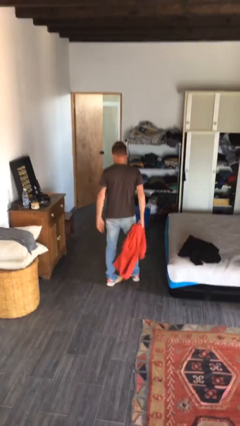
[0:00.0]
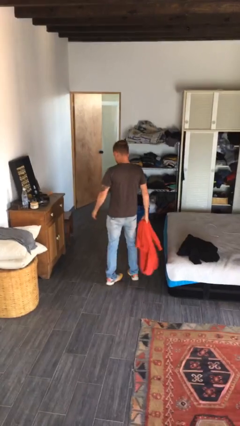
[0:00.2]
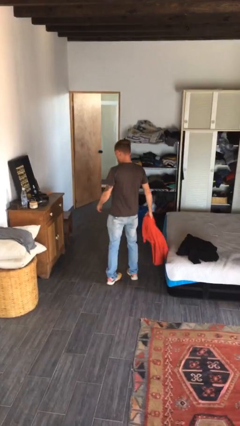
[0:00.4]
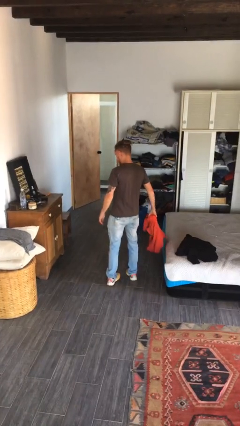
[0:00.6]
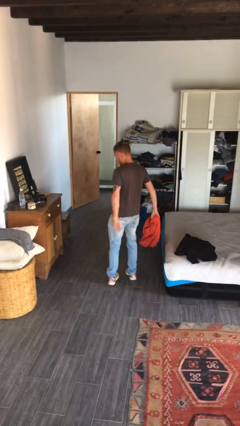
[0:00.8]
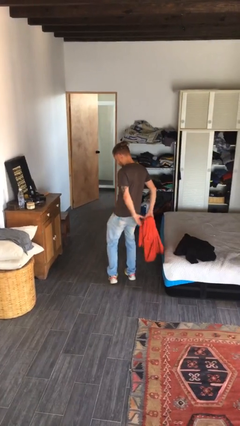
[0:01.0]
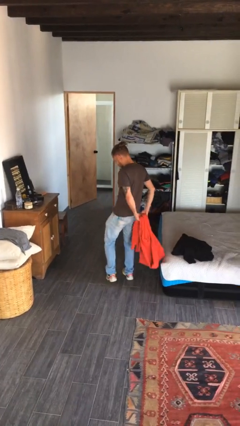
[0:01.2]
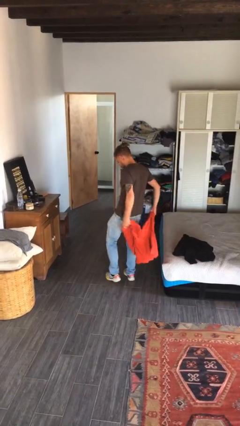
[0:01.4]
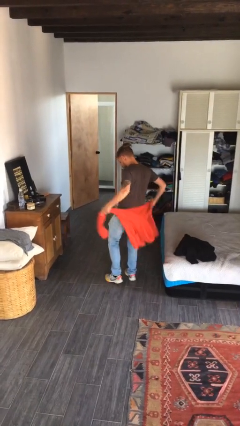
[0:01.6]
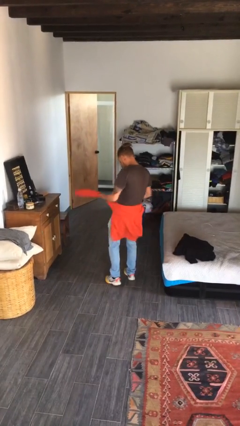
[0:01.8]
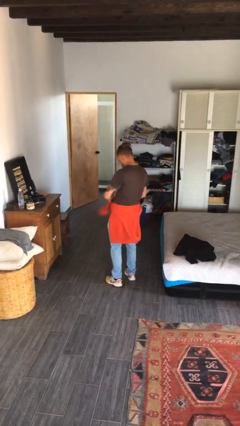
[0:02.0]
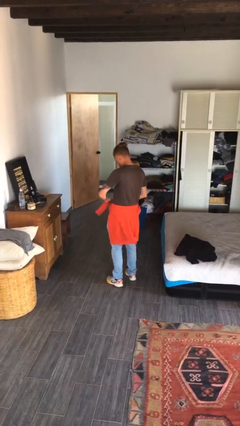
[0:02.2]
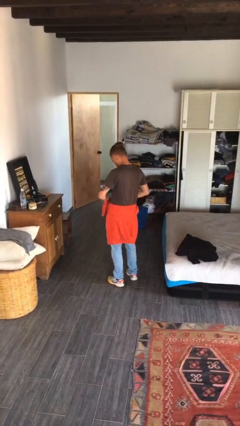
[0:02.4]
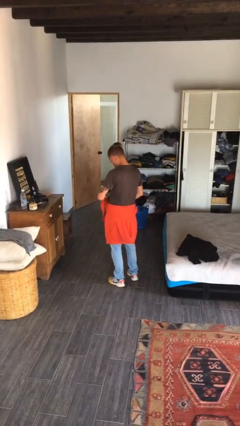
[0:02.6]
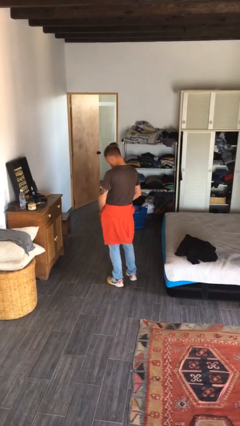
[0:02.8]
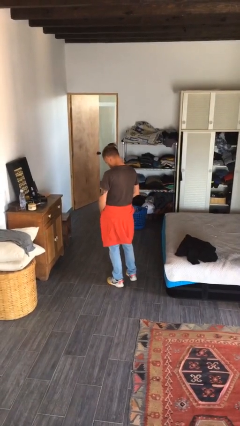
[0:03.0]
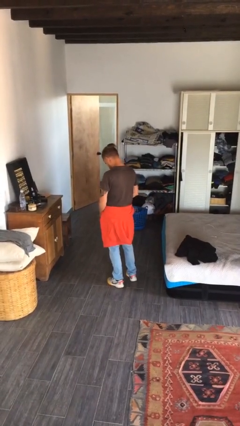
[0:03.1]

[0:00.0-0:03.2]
person ties jacket around waist

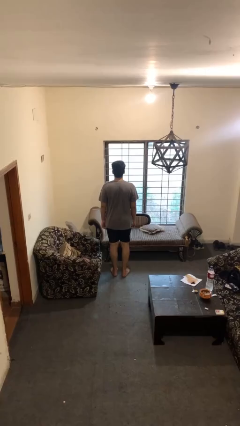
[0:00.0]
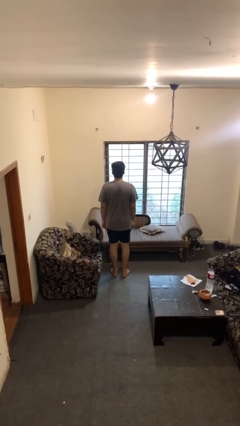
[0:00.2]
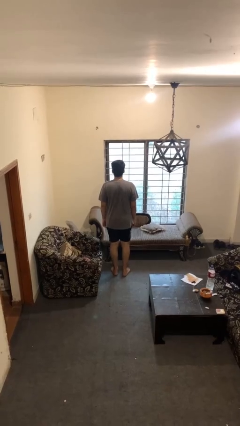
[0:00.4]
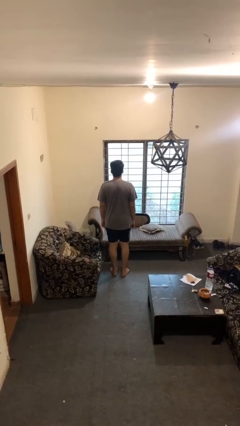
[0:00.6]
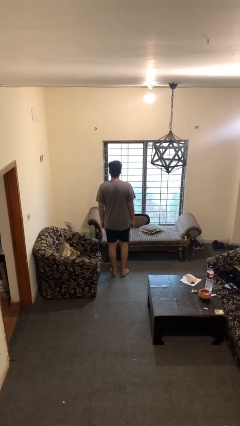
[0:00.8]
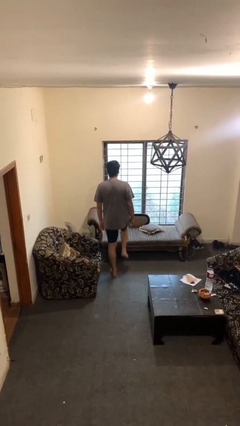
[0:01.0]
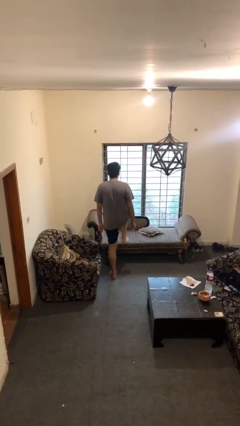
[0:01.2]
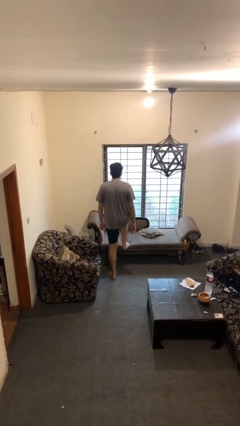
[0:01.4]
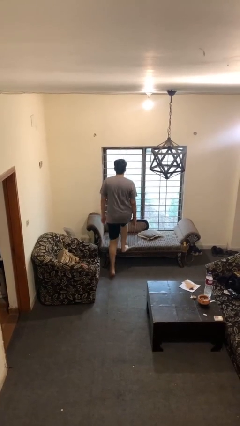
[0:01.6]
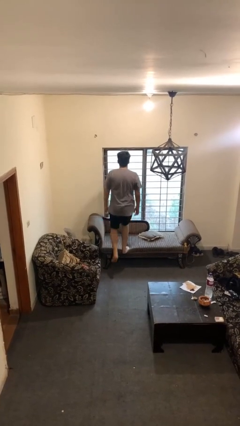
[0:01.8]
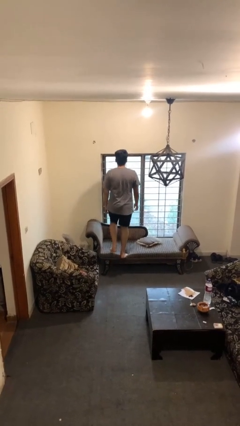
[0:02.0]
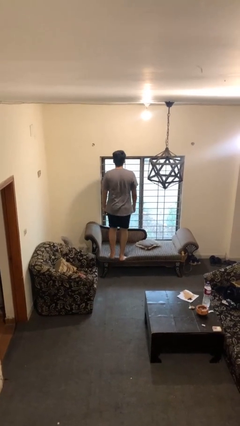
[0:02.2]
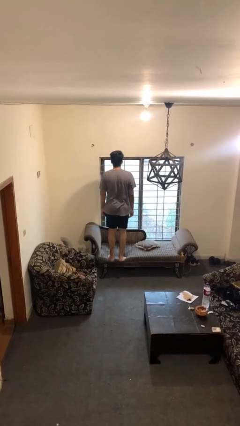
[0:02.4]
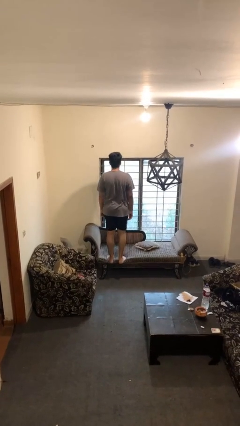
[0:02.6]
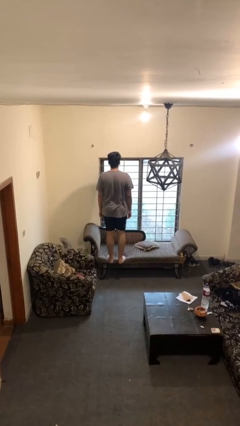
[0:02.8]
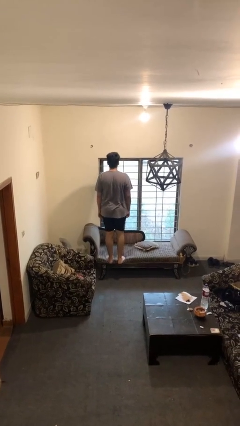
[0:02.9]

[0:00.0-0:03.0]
person climbs on couch

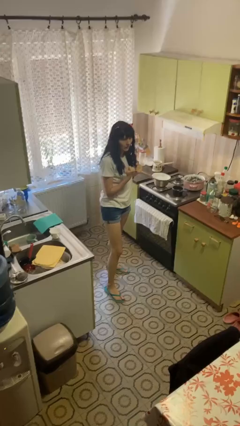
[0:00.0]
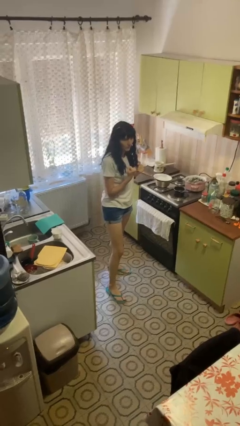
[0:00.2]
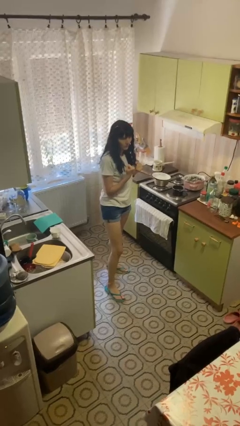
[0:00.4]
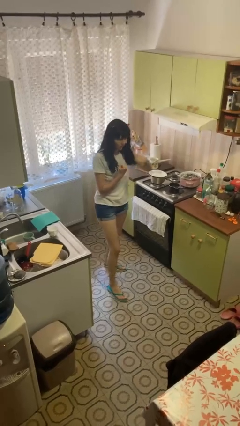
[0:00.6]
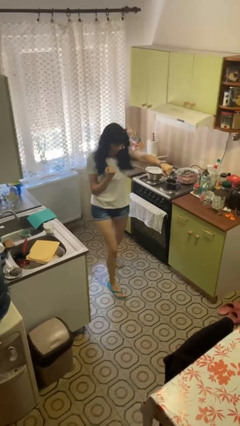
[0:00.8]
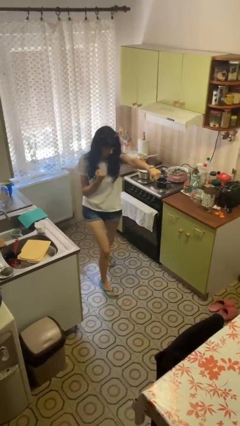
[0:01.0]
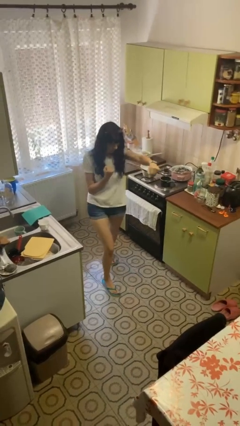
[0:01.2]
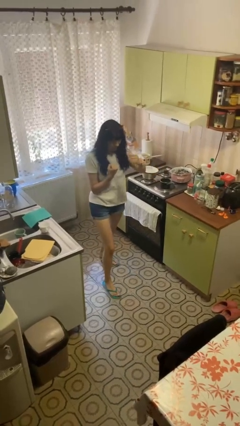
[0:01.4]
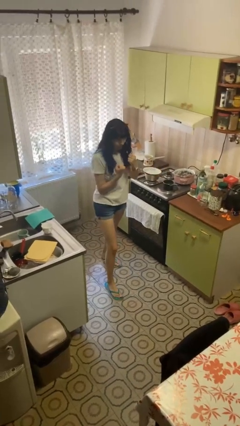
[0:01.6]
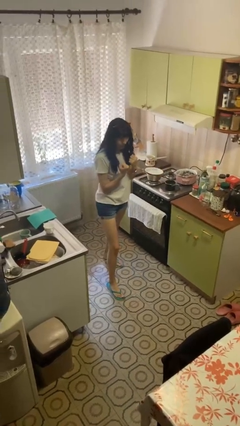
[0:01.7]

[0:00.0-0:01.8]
person punches

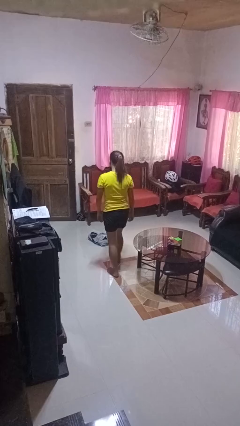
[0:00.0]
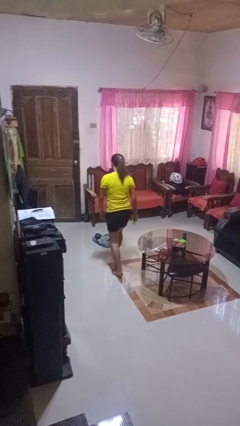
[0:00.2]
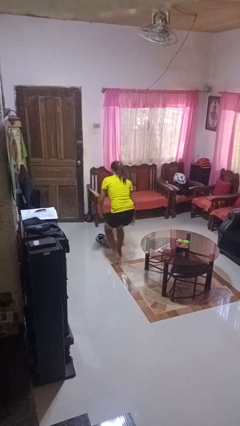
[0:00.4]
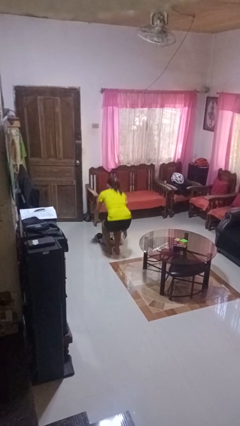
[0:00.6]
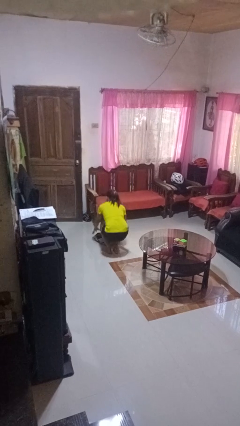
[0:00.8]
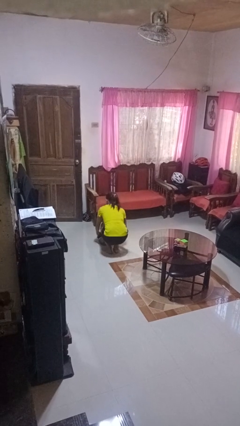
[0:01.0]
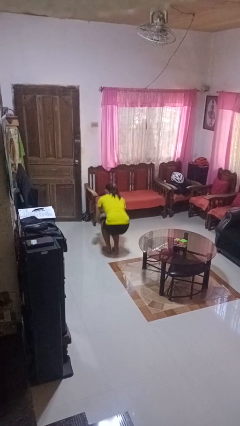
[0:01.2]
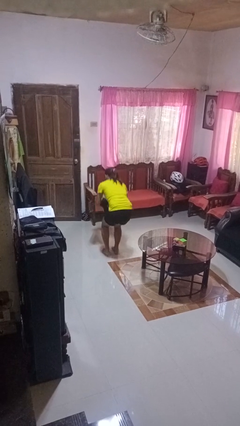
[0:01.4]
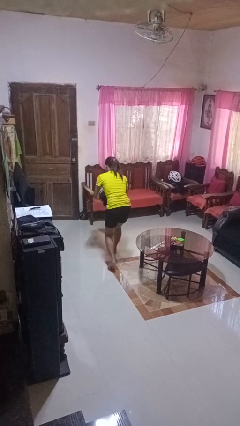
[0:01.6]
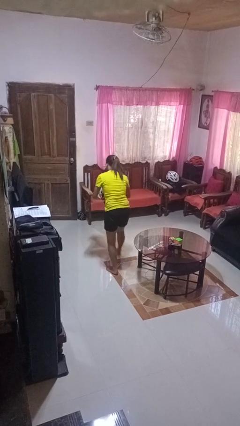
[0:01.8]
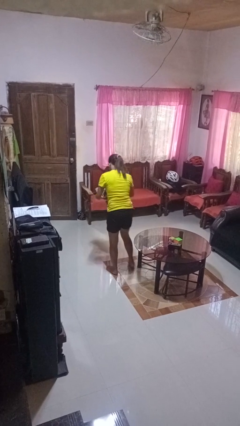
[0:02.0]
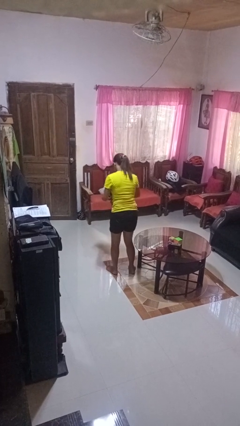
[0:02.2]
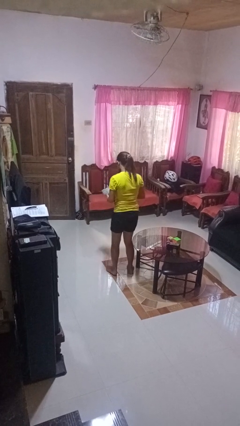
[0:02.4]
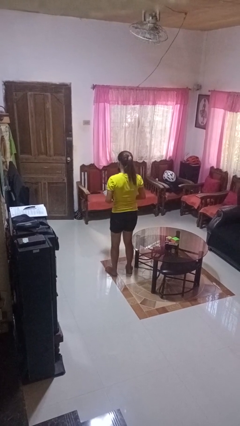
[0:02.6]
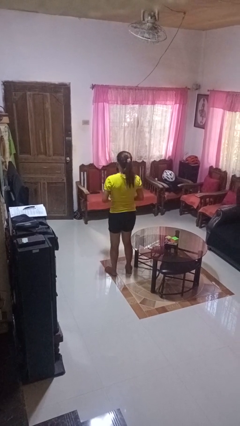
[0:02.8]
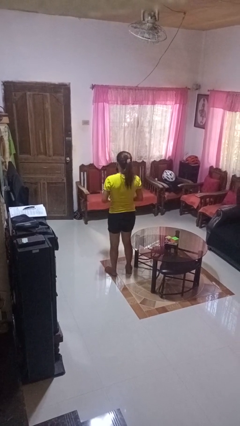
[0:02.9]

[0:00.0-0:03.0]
person picks up object from floor

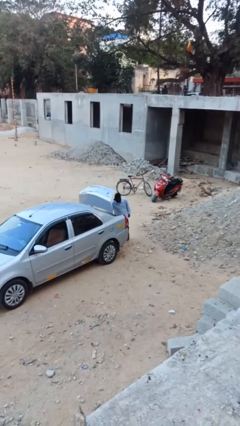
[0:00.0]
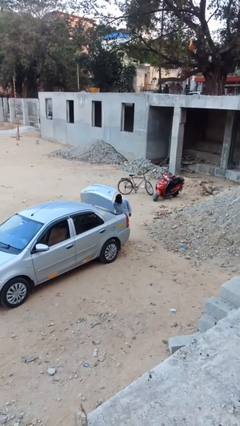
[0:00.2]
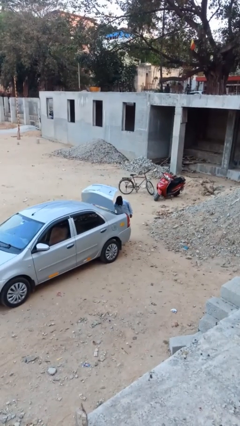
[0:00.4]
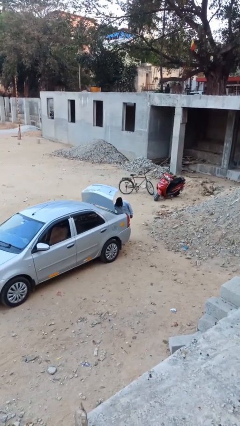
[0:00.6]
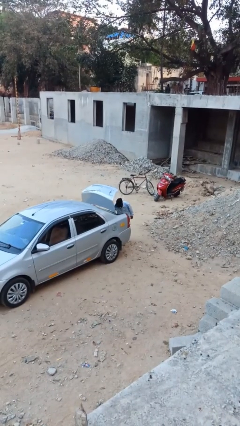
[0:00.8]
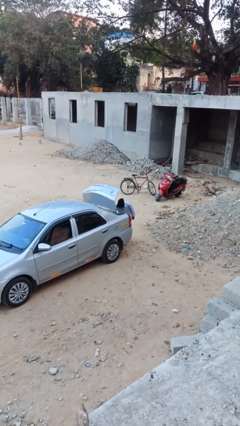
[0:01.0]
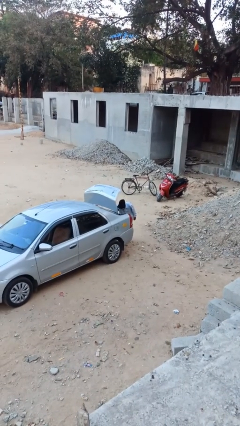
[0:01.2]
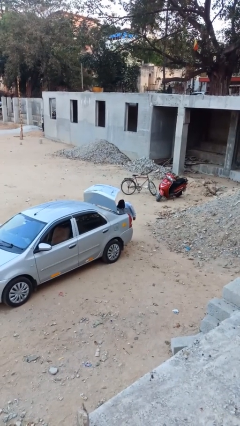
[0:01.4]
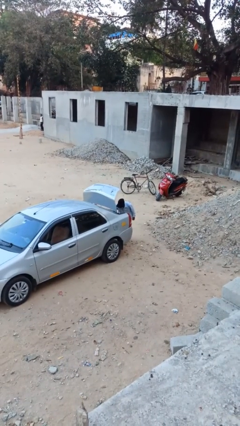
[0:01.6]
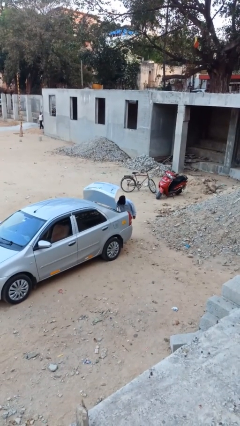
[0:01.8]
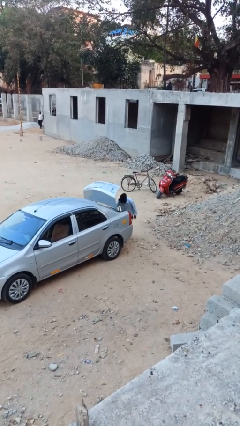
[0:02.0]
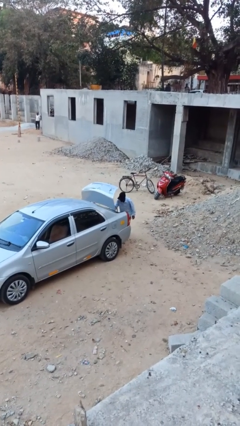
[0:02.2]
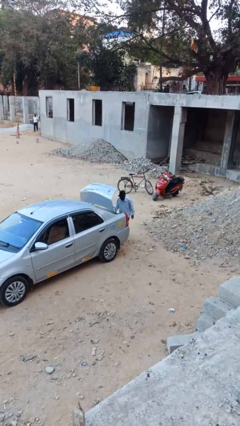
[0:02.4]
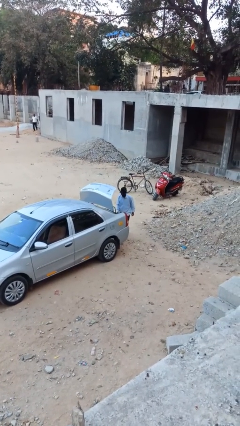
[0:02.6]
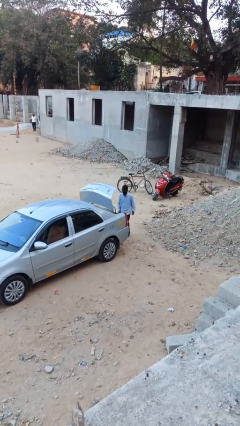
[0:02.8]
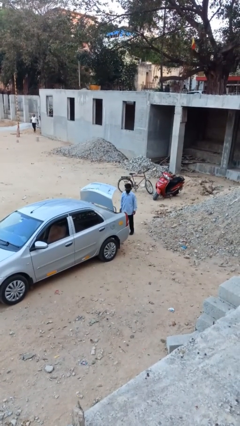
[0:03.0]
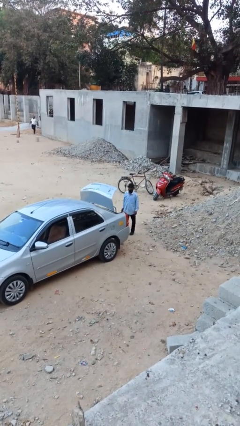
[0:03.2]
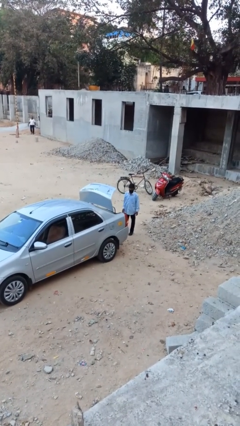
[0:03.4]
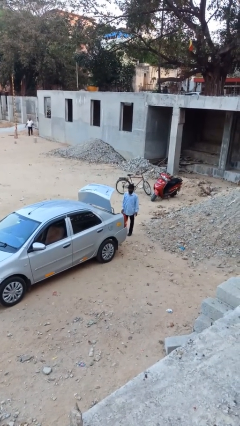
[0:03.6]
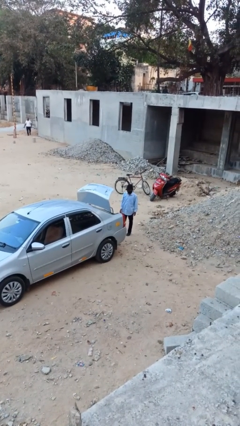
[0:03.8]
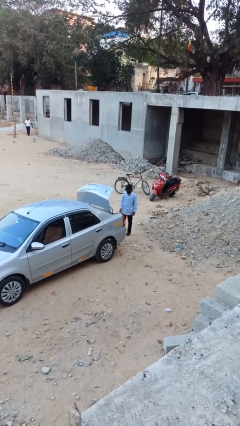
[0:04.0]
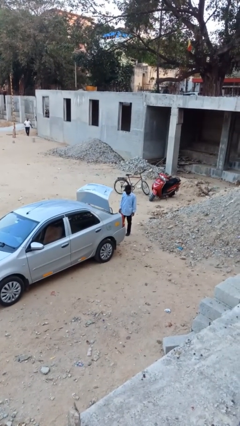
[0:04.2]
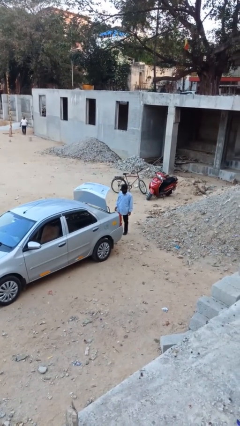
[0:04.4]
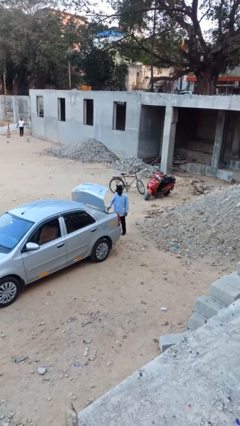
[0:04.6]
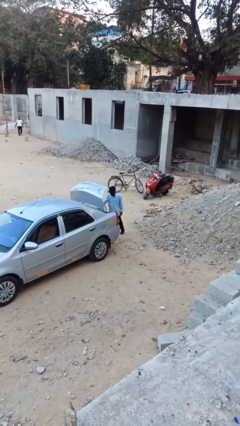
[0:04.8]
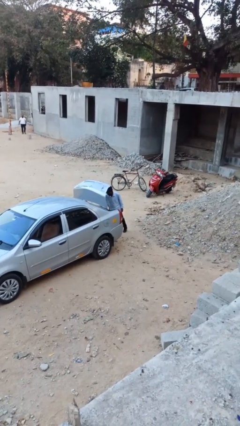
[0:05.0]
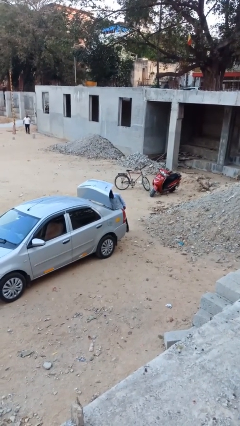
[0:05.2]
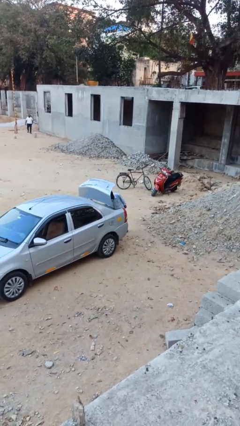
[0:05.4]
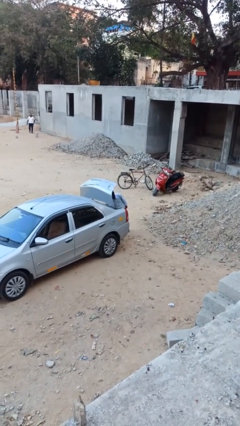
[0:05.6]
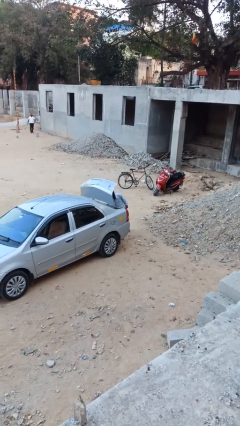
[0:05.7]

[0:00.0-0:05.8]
person loads car

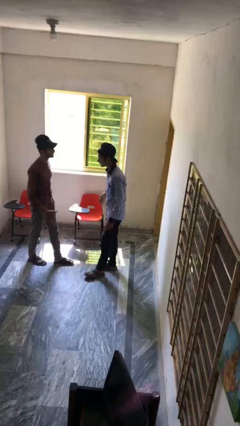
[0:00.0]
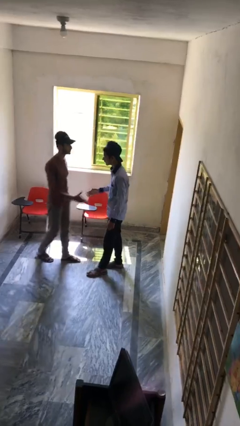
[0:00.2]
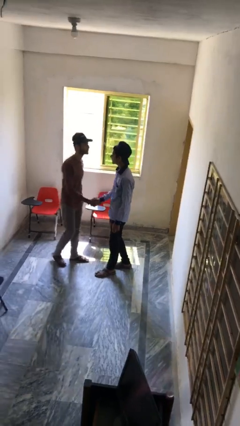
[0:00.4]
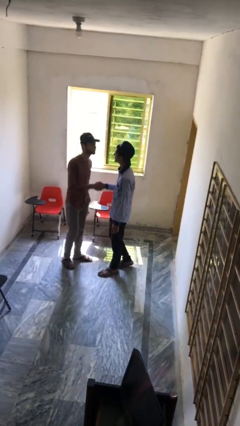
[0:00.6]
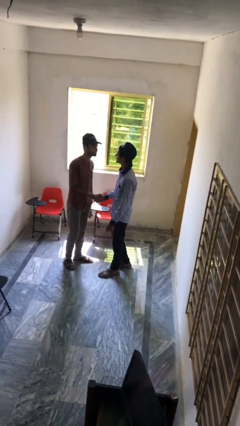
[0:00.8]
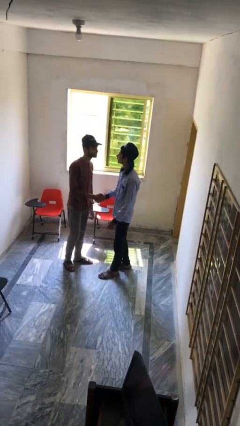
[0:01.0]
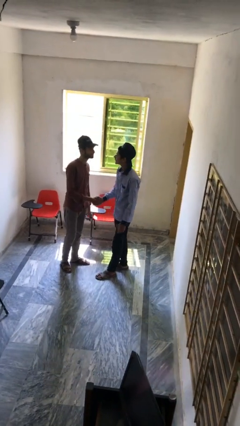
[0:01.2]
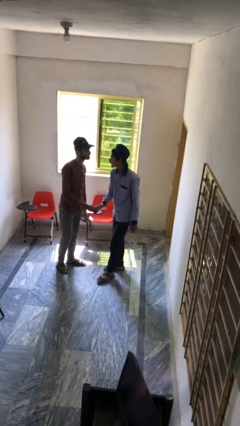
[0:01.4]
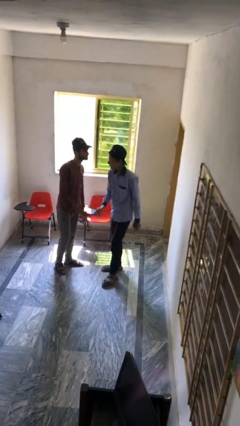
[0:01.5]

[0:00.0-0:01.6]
person shakes hand
